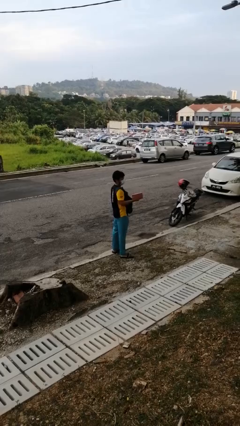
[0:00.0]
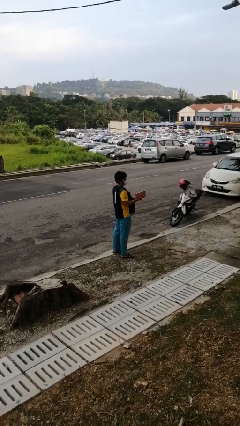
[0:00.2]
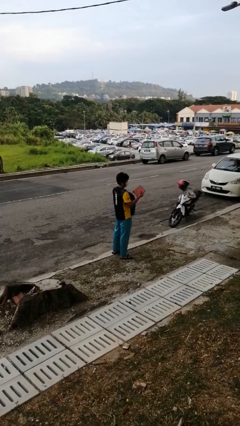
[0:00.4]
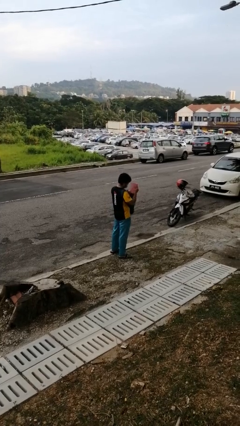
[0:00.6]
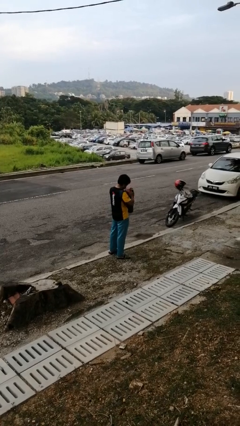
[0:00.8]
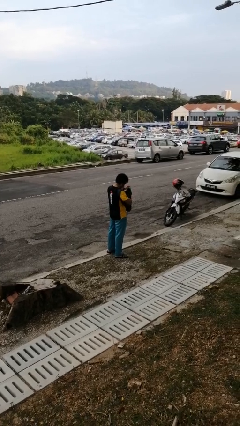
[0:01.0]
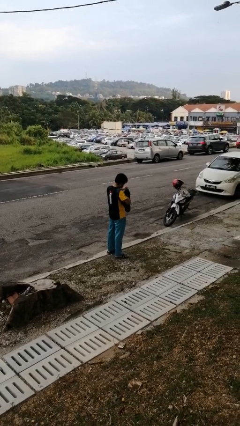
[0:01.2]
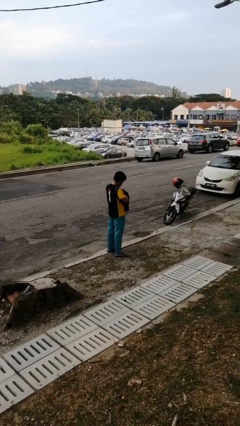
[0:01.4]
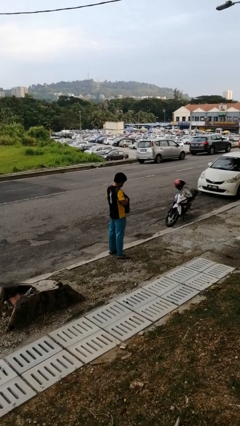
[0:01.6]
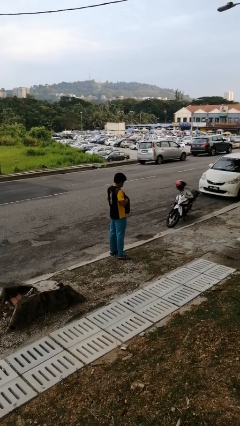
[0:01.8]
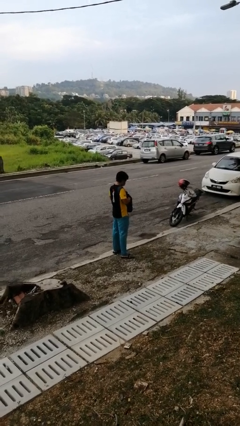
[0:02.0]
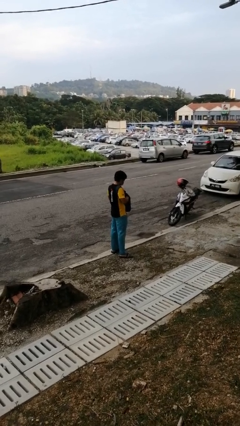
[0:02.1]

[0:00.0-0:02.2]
person puts object into backpack

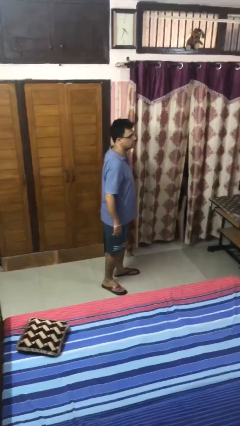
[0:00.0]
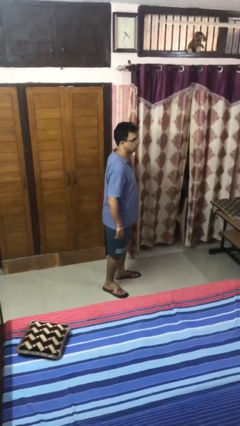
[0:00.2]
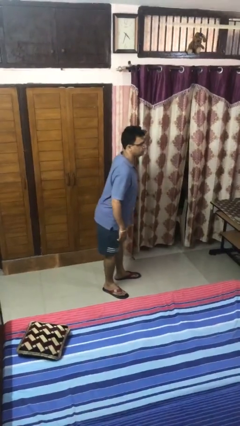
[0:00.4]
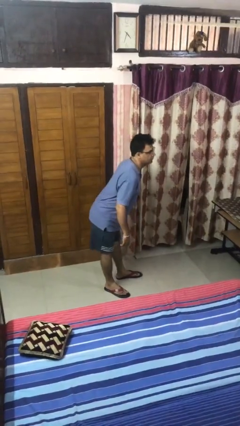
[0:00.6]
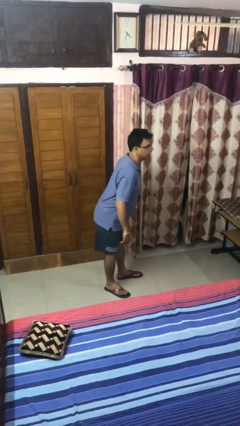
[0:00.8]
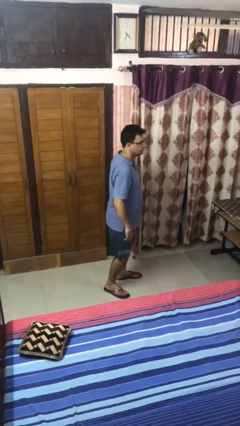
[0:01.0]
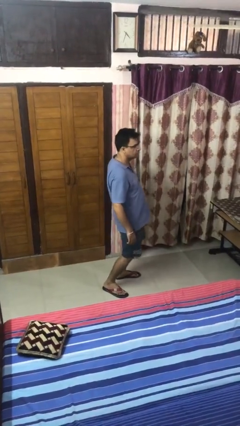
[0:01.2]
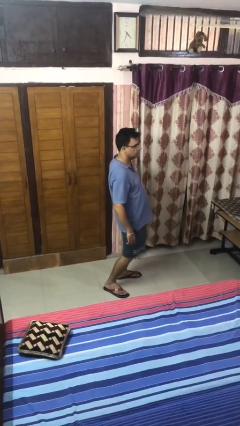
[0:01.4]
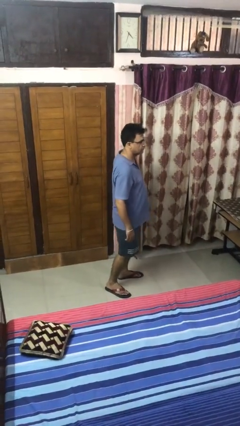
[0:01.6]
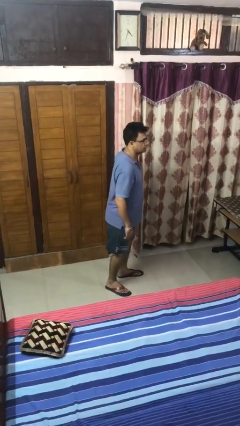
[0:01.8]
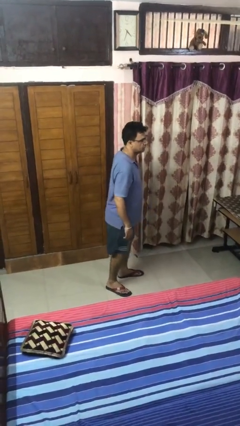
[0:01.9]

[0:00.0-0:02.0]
person wiggles hips

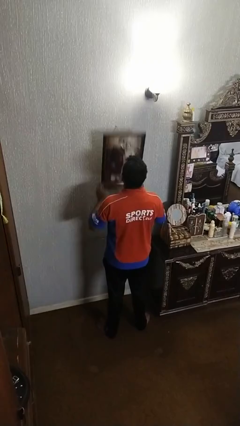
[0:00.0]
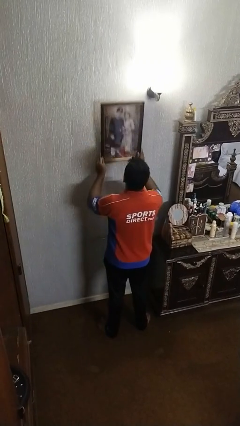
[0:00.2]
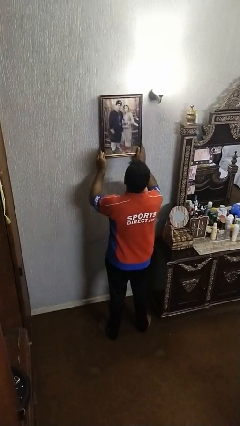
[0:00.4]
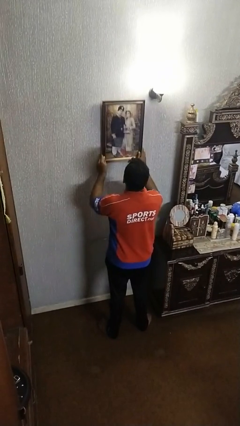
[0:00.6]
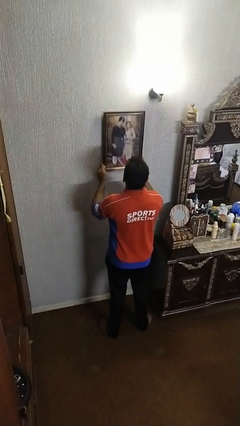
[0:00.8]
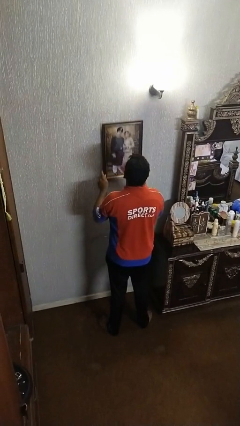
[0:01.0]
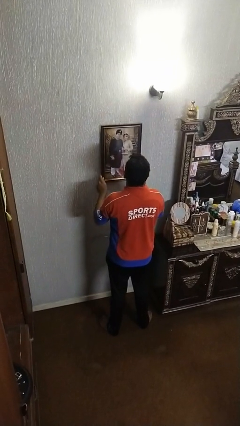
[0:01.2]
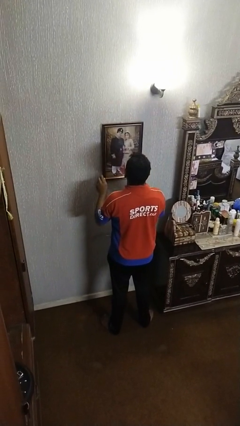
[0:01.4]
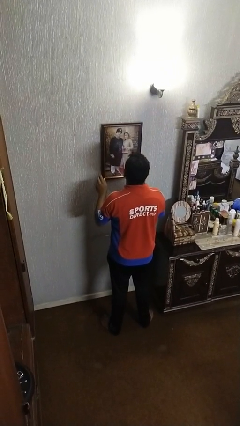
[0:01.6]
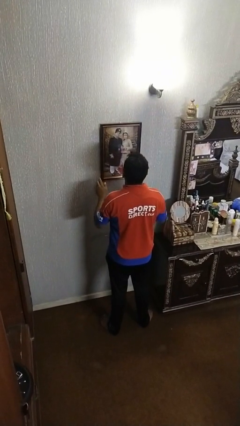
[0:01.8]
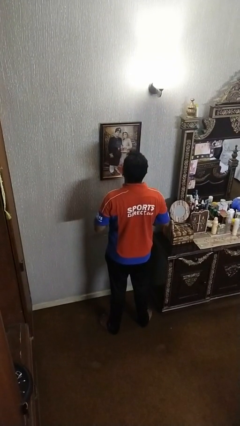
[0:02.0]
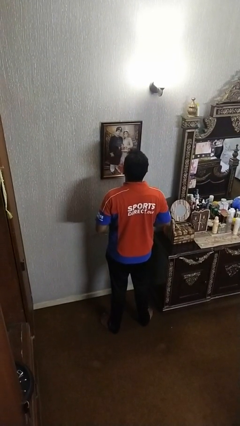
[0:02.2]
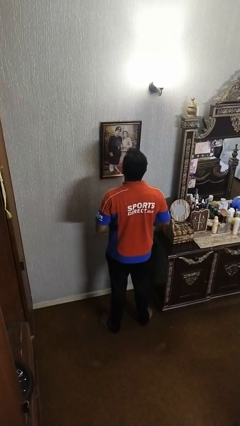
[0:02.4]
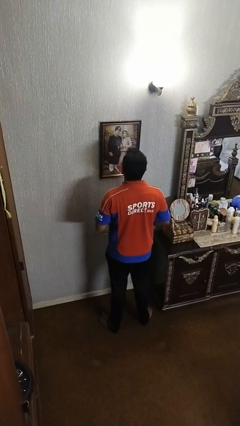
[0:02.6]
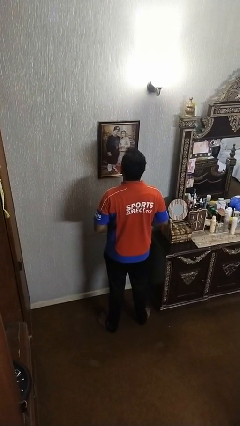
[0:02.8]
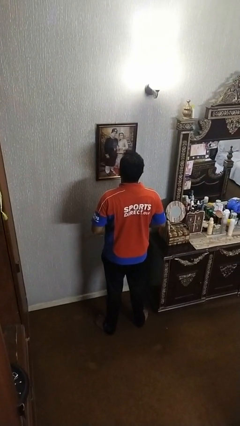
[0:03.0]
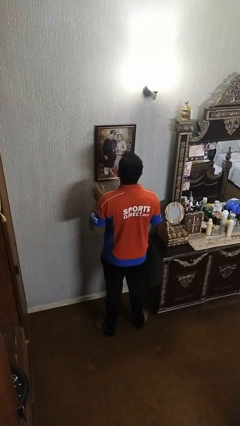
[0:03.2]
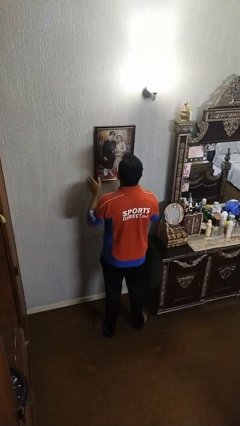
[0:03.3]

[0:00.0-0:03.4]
person puts up picture frame

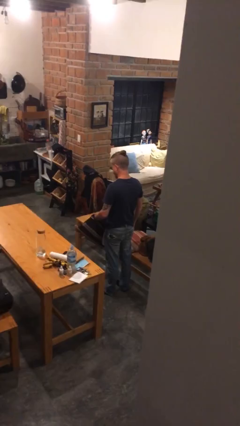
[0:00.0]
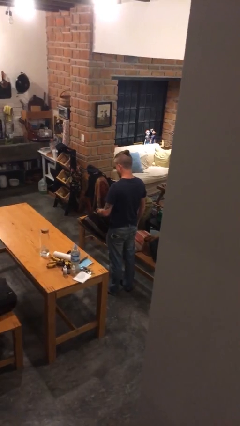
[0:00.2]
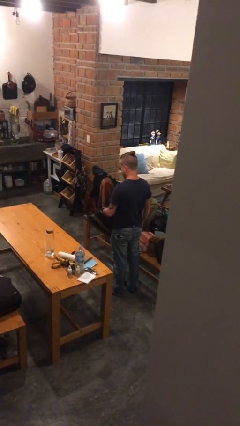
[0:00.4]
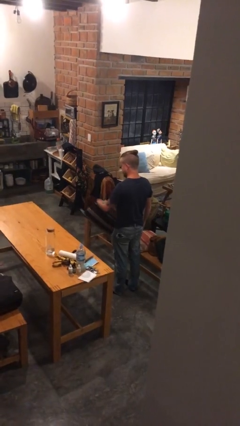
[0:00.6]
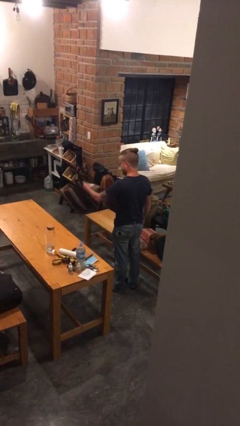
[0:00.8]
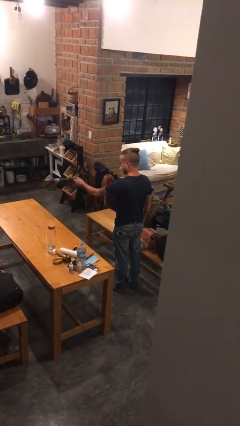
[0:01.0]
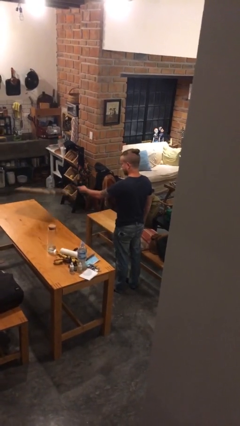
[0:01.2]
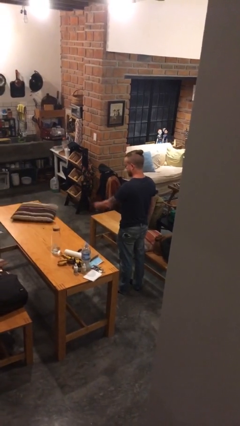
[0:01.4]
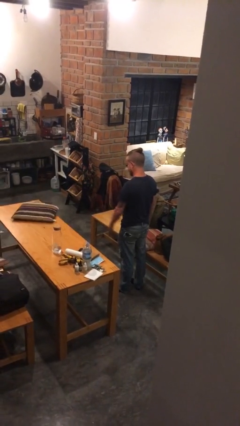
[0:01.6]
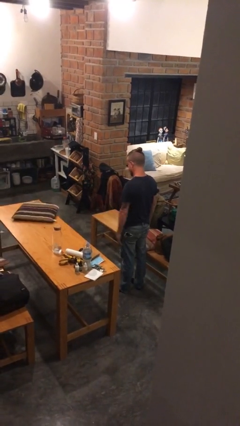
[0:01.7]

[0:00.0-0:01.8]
person throws object on table

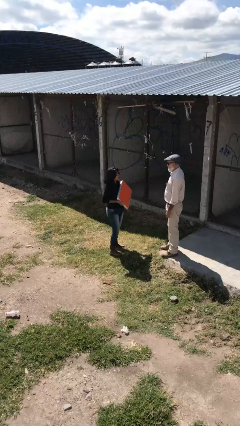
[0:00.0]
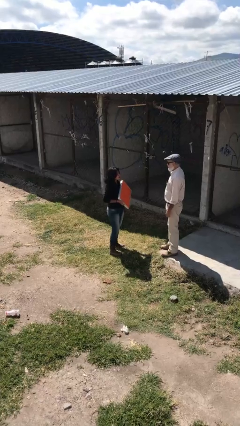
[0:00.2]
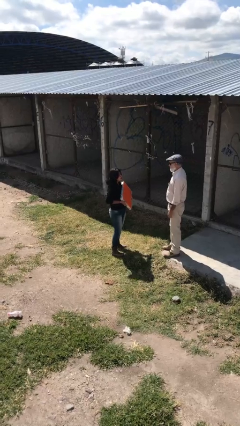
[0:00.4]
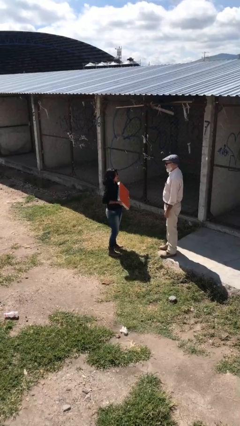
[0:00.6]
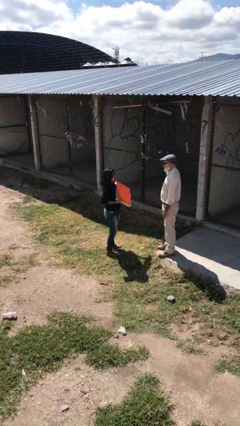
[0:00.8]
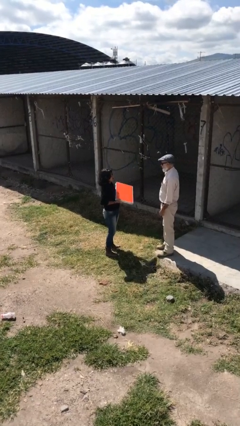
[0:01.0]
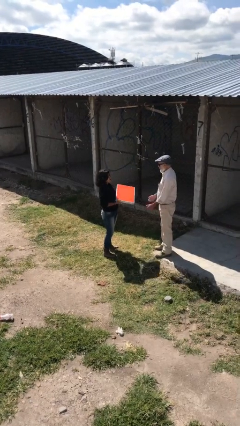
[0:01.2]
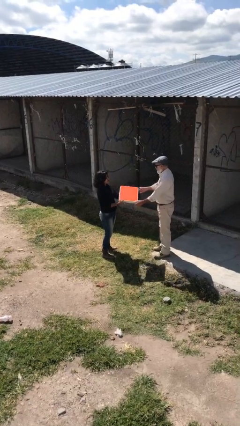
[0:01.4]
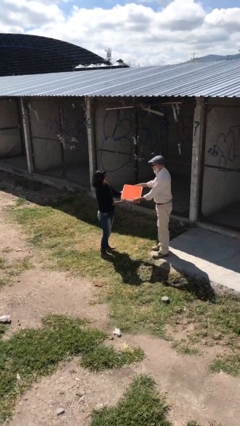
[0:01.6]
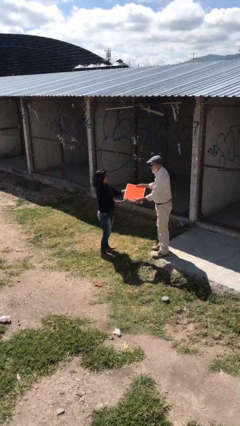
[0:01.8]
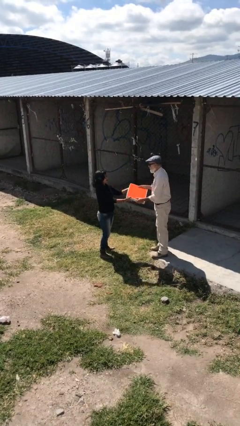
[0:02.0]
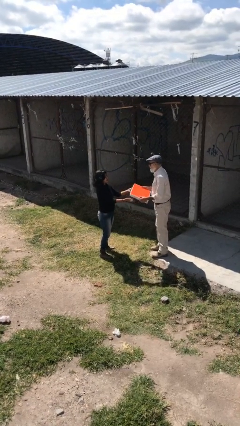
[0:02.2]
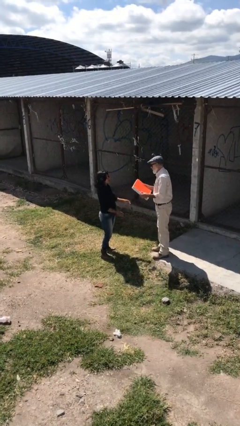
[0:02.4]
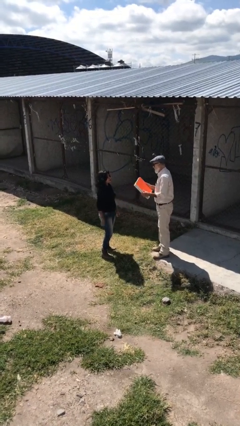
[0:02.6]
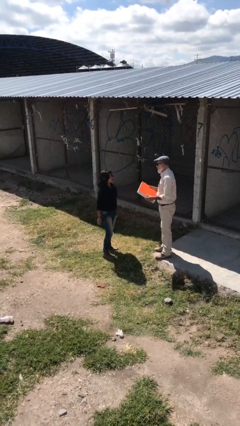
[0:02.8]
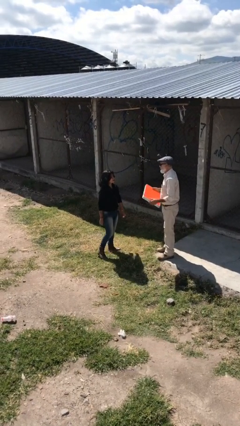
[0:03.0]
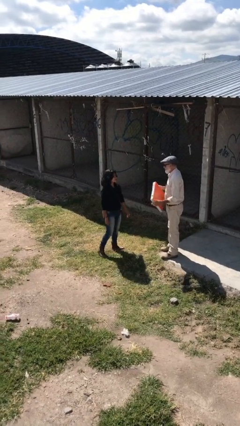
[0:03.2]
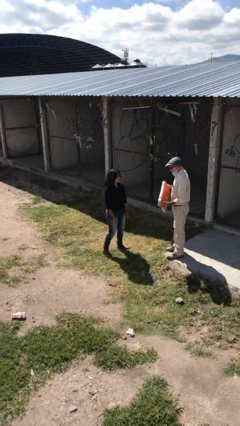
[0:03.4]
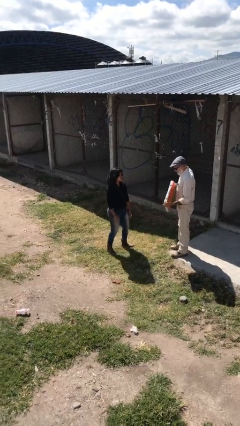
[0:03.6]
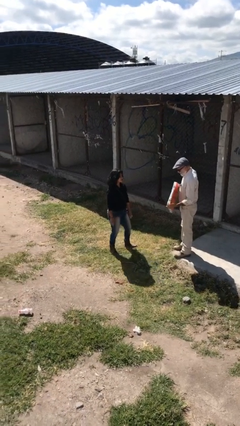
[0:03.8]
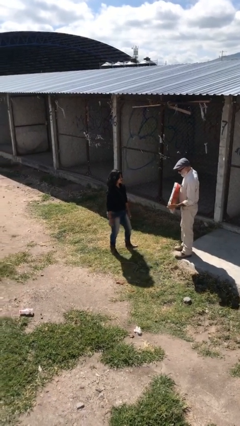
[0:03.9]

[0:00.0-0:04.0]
person transfers object to person

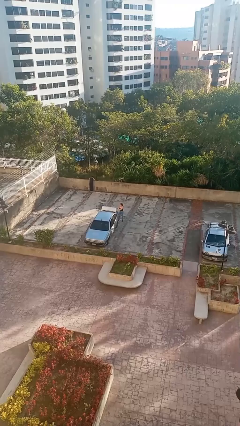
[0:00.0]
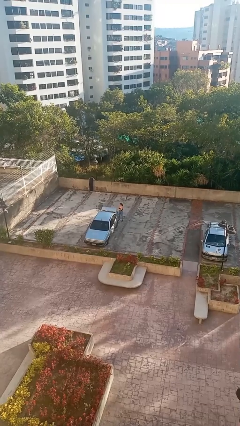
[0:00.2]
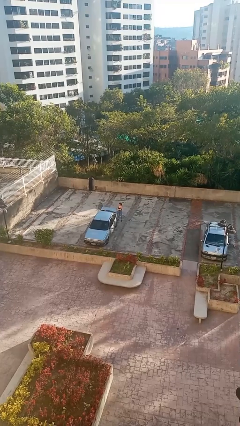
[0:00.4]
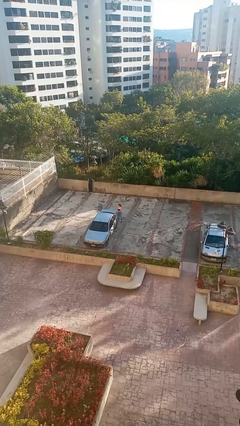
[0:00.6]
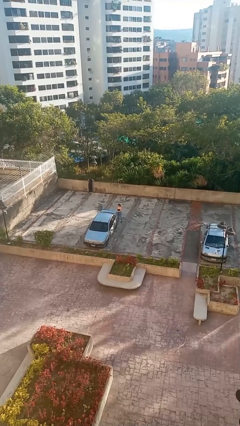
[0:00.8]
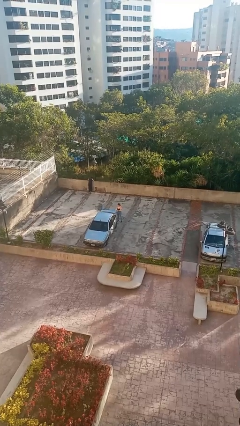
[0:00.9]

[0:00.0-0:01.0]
person closes car trunk

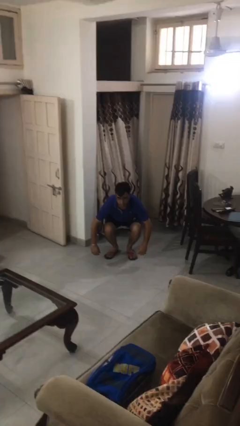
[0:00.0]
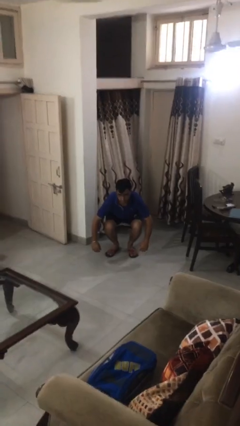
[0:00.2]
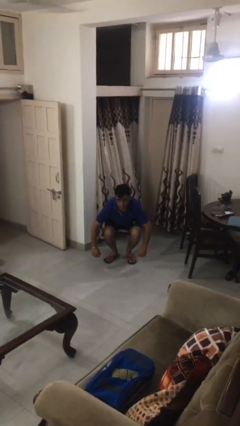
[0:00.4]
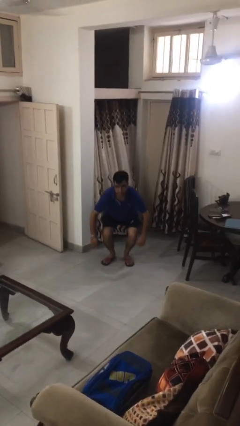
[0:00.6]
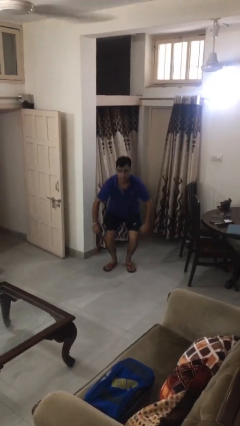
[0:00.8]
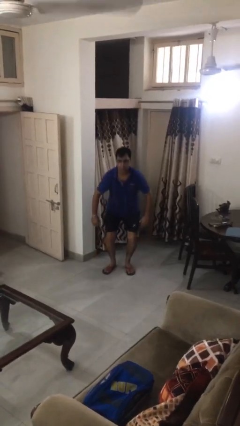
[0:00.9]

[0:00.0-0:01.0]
person stands up

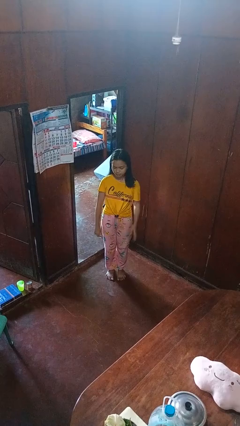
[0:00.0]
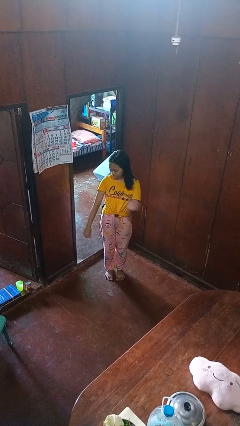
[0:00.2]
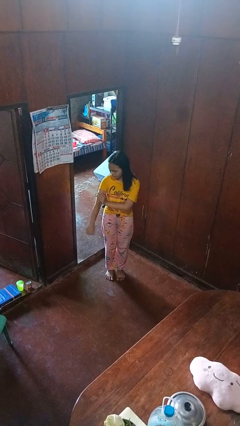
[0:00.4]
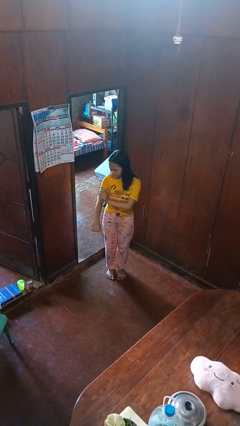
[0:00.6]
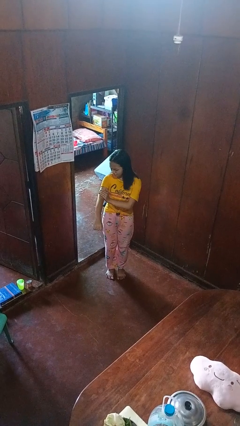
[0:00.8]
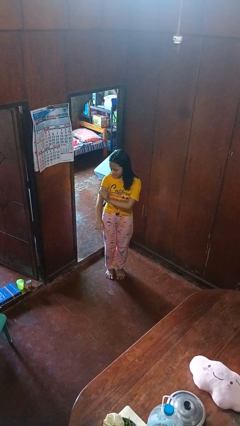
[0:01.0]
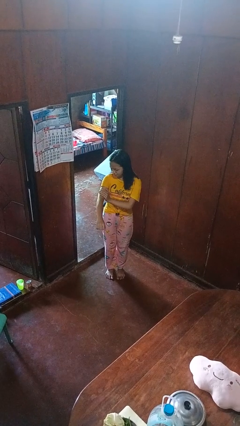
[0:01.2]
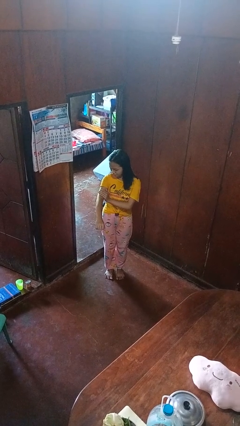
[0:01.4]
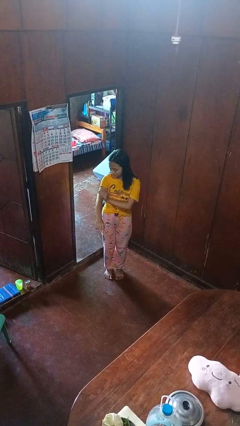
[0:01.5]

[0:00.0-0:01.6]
person swats bug

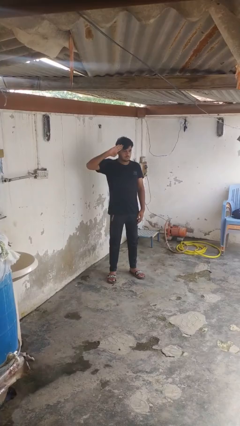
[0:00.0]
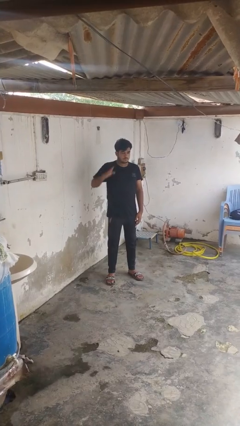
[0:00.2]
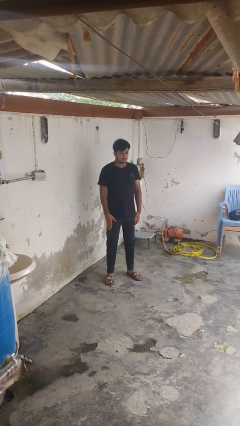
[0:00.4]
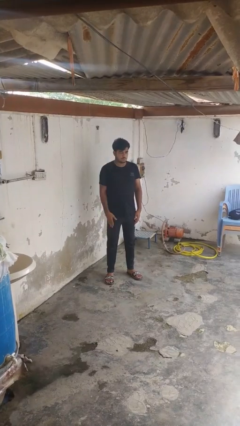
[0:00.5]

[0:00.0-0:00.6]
person salutes
